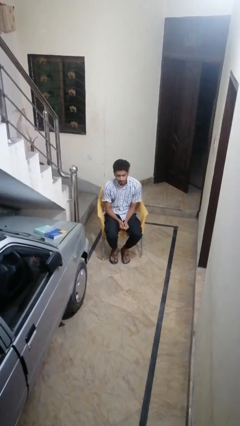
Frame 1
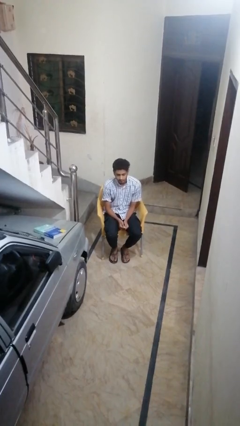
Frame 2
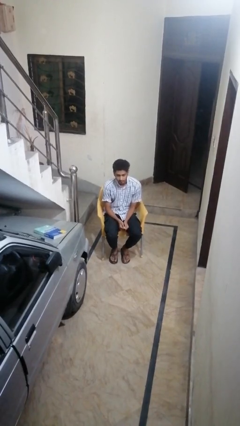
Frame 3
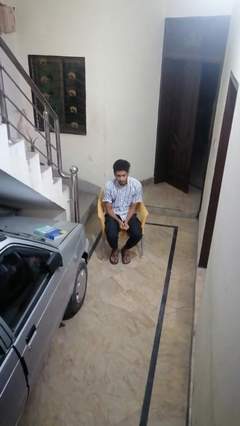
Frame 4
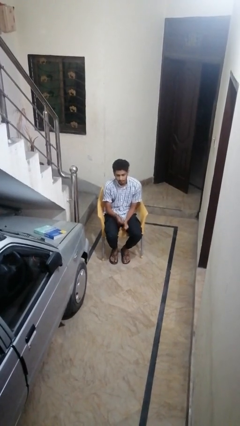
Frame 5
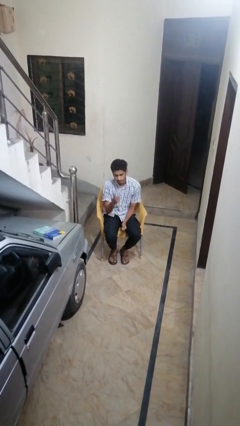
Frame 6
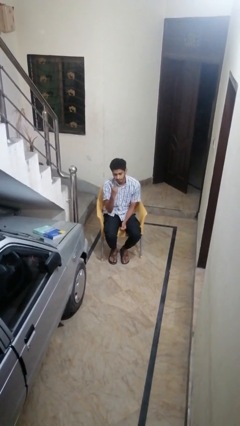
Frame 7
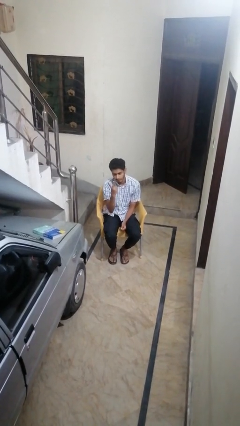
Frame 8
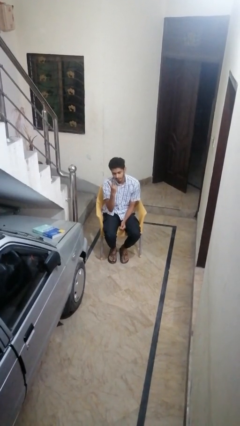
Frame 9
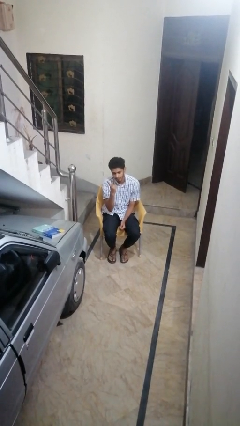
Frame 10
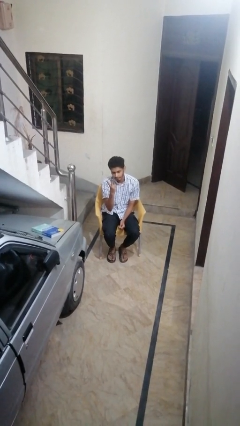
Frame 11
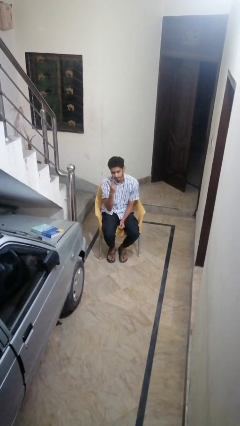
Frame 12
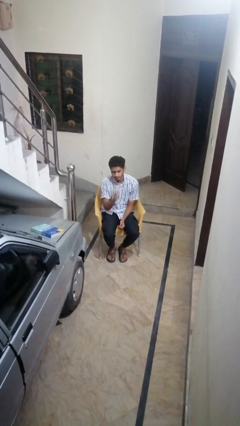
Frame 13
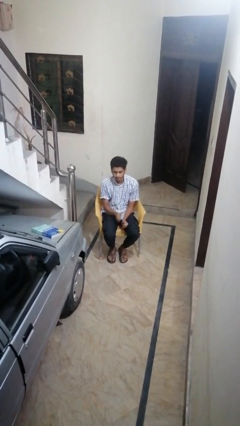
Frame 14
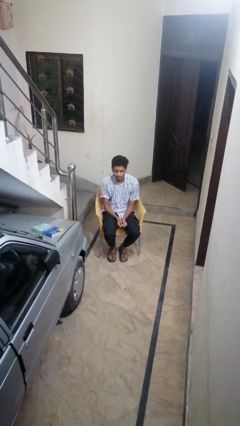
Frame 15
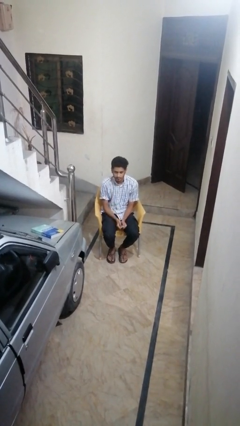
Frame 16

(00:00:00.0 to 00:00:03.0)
person gestures peace

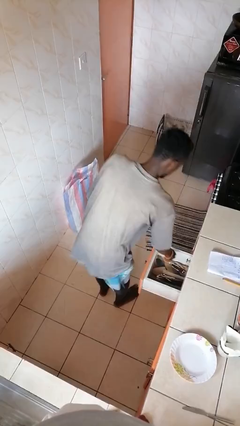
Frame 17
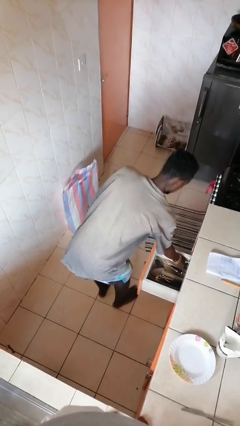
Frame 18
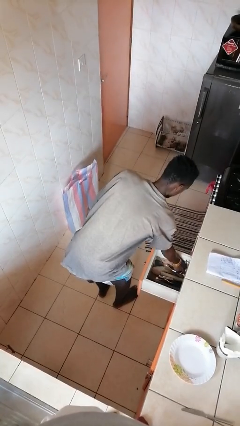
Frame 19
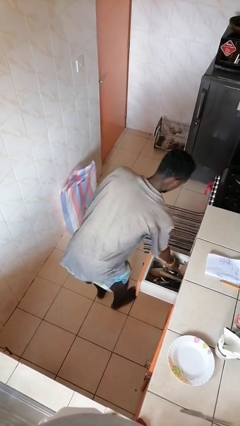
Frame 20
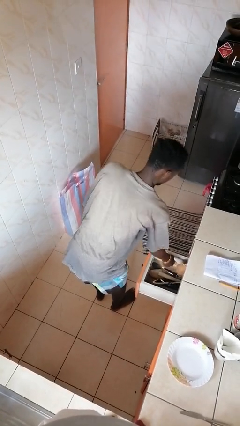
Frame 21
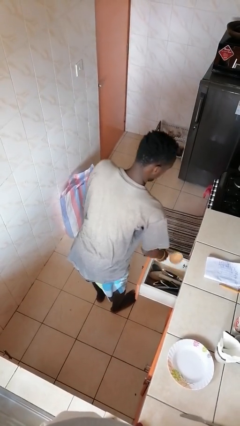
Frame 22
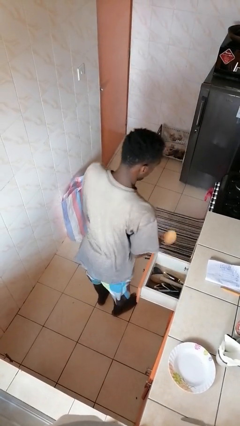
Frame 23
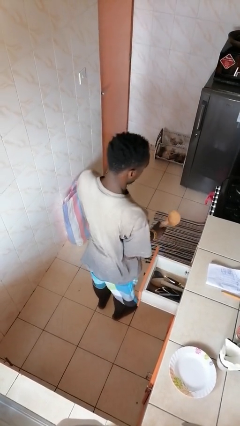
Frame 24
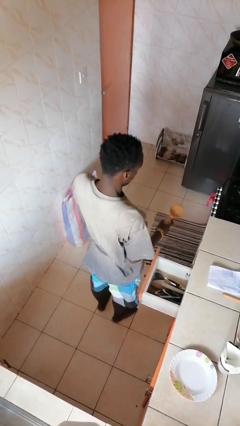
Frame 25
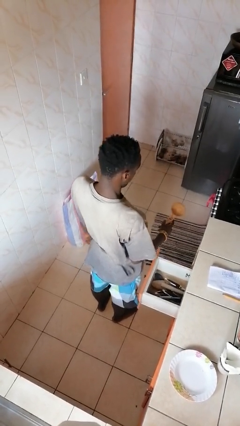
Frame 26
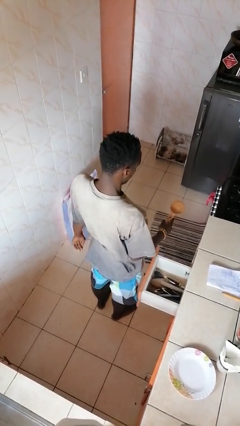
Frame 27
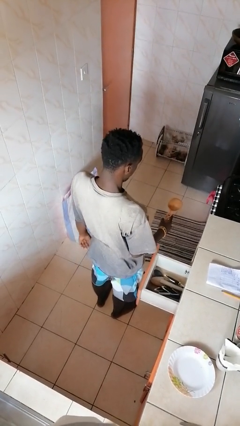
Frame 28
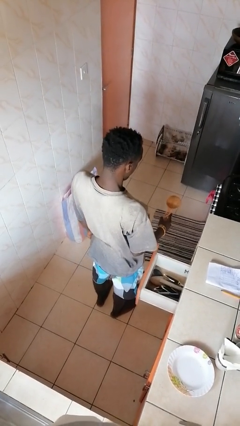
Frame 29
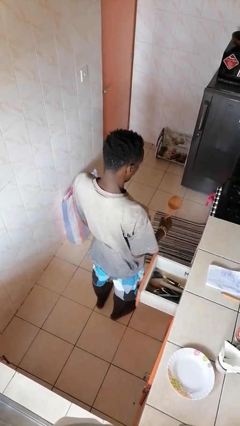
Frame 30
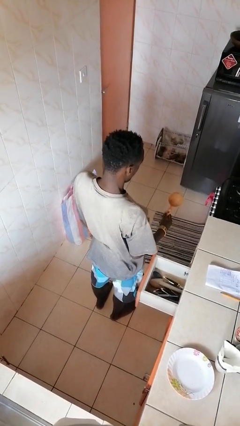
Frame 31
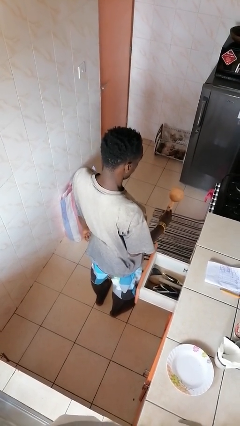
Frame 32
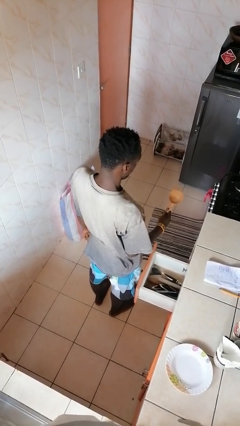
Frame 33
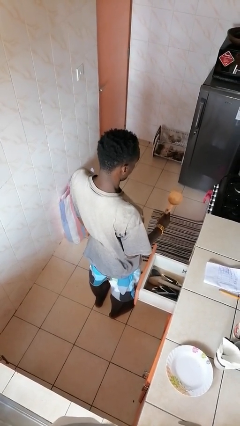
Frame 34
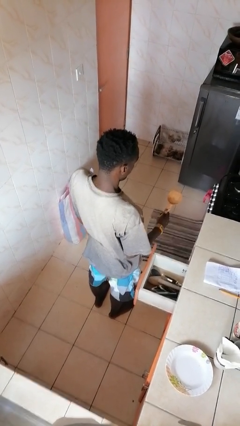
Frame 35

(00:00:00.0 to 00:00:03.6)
person takes object from kitchen drawer

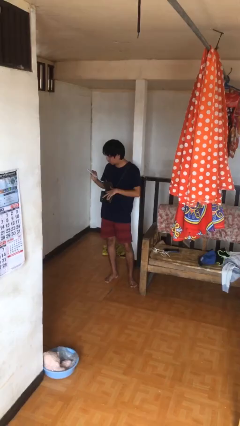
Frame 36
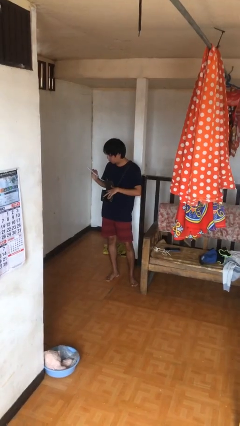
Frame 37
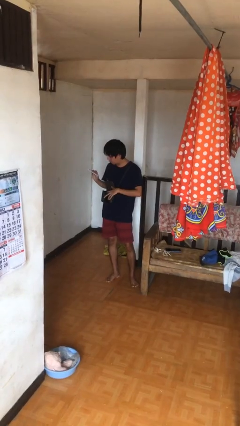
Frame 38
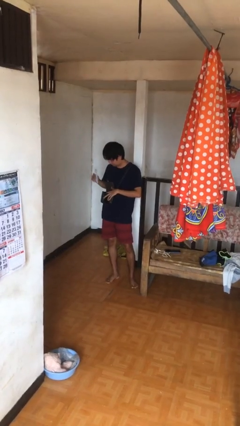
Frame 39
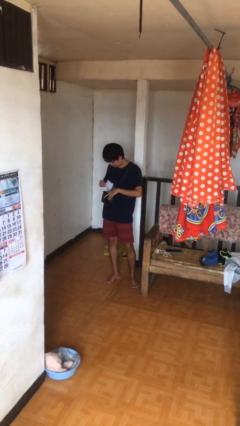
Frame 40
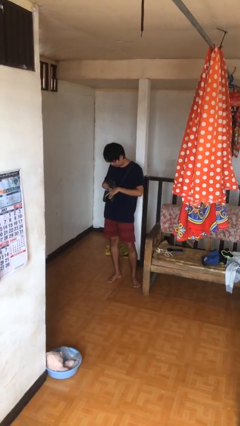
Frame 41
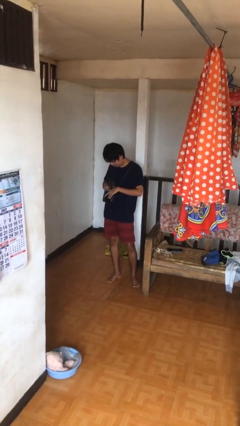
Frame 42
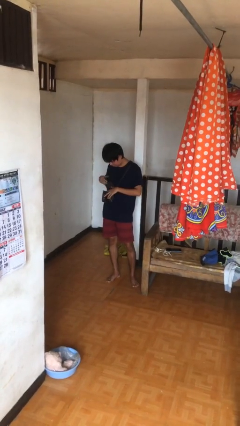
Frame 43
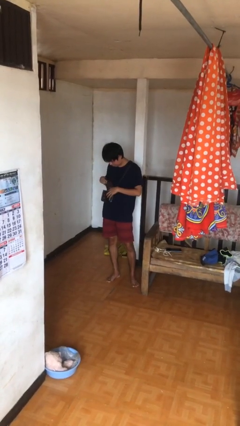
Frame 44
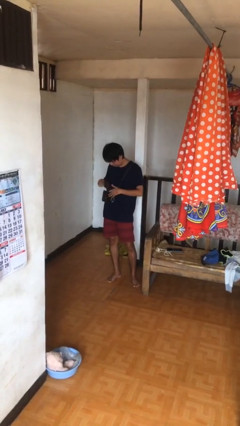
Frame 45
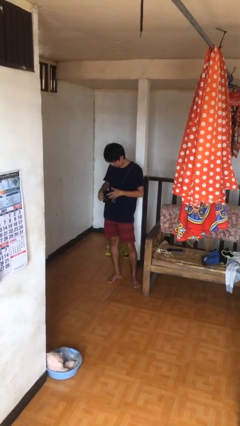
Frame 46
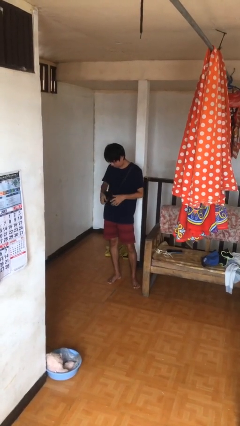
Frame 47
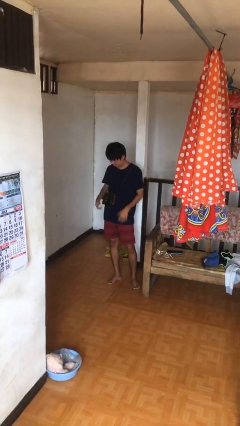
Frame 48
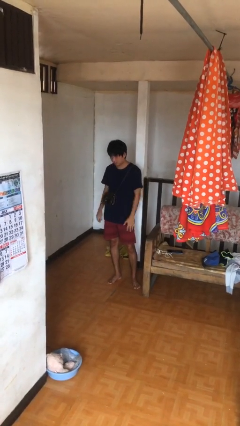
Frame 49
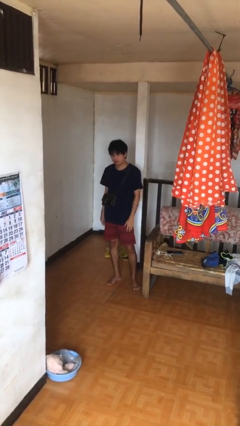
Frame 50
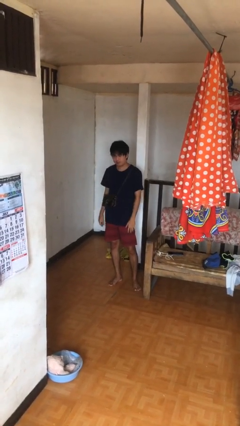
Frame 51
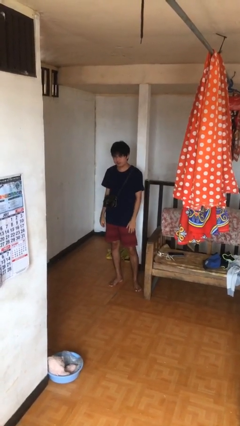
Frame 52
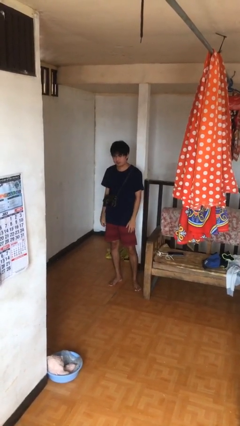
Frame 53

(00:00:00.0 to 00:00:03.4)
person puts object into purse

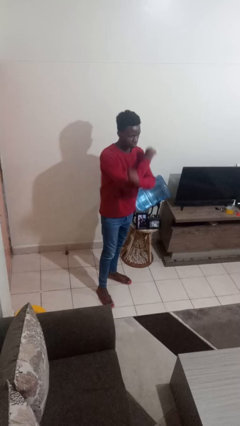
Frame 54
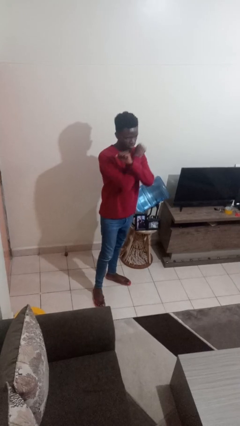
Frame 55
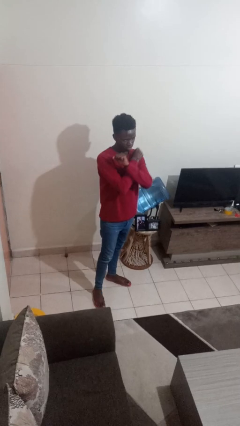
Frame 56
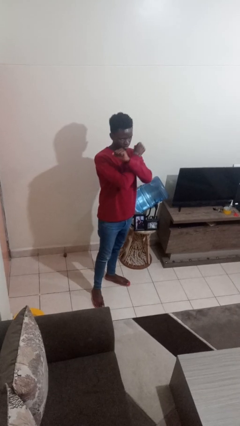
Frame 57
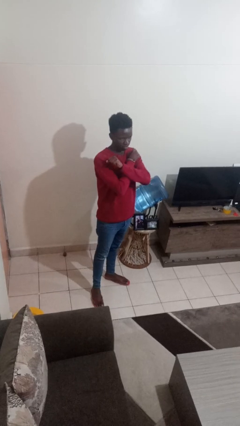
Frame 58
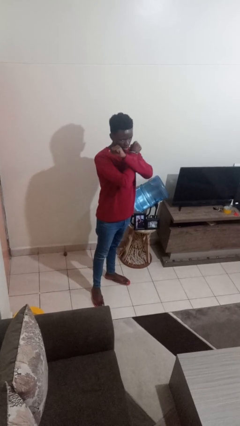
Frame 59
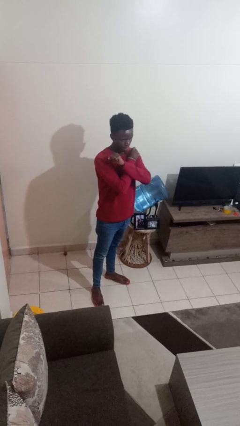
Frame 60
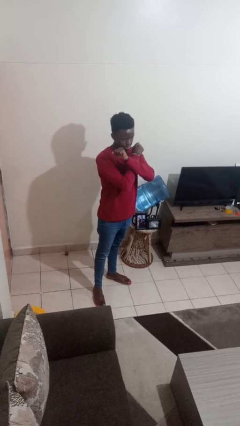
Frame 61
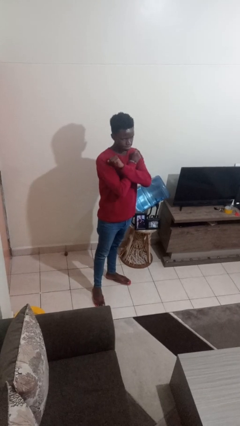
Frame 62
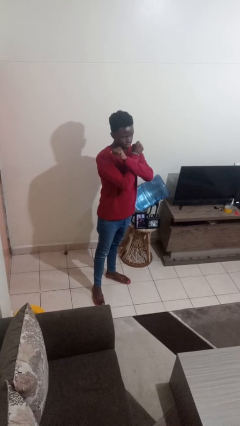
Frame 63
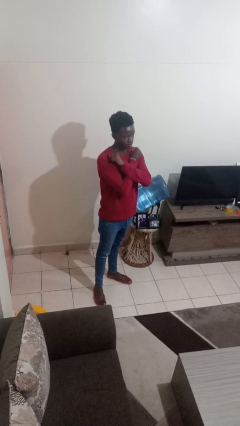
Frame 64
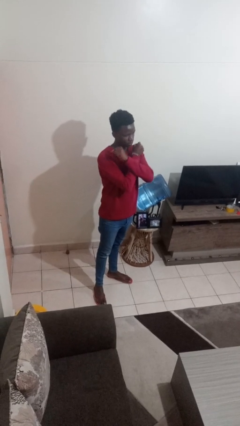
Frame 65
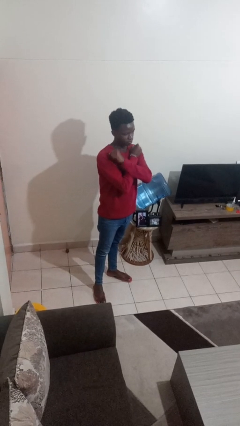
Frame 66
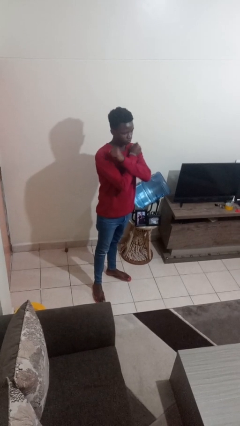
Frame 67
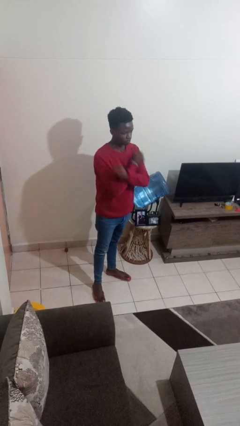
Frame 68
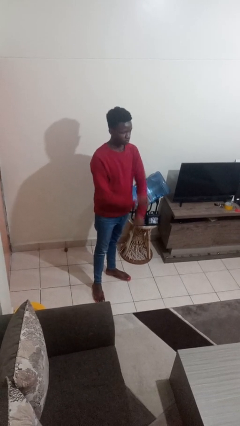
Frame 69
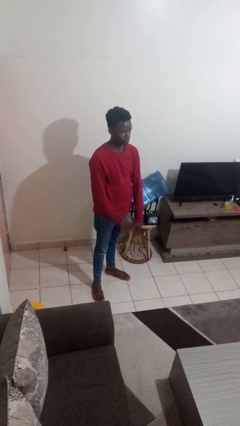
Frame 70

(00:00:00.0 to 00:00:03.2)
person gestures arms x

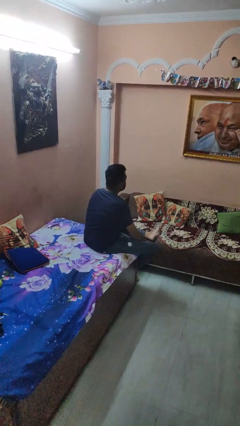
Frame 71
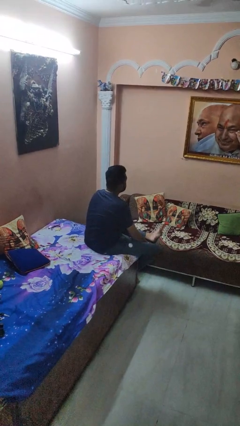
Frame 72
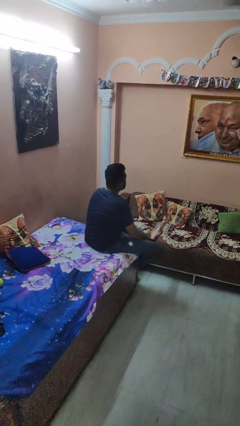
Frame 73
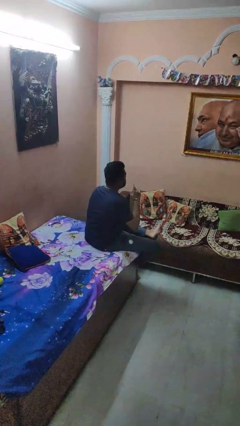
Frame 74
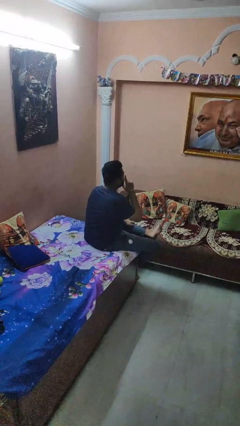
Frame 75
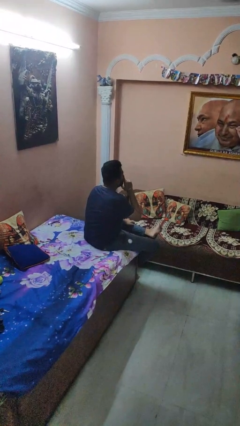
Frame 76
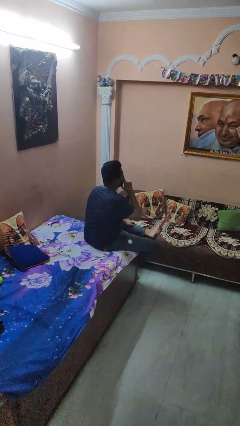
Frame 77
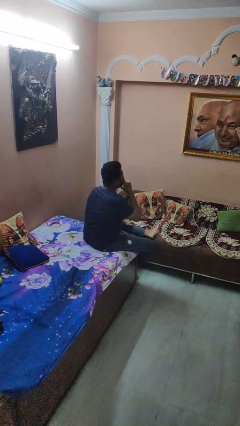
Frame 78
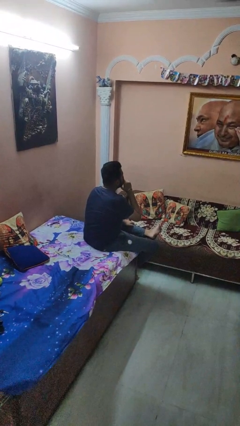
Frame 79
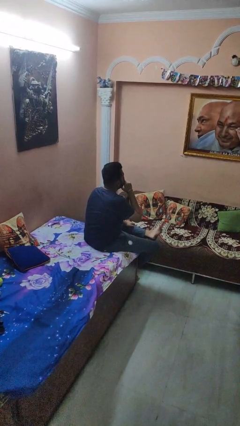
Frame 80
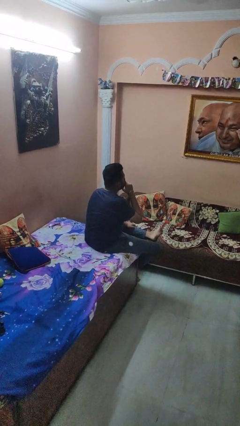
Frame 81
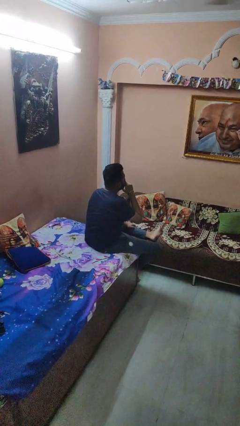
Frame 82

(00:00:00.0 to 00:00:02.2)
person gestures be quiet

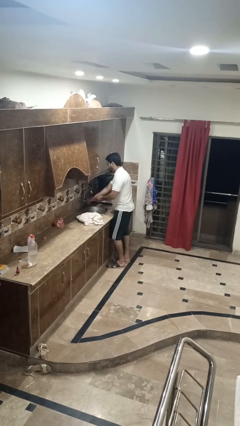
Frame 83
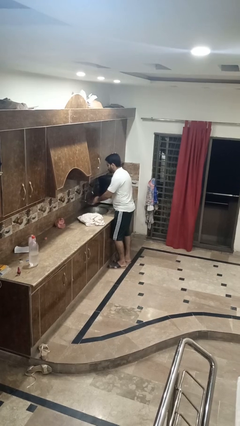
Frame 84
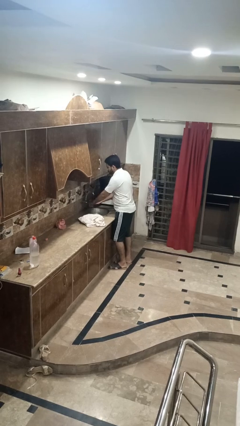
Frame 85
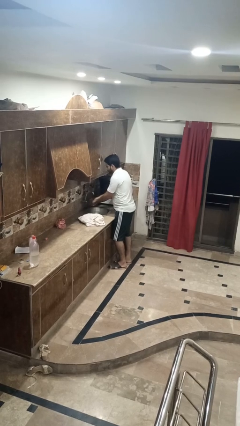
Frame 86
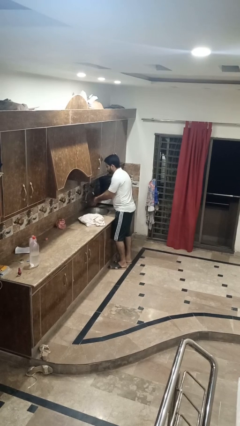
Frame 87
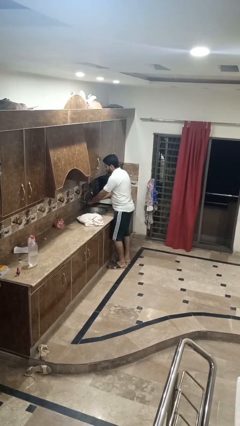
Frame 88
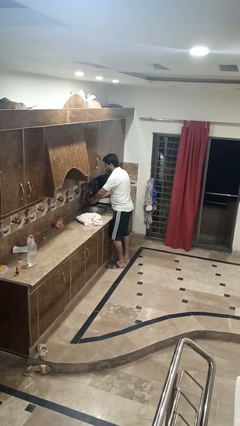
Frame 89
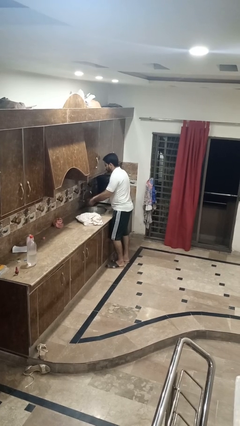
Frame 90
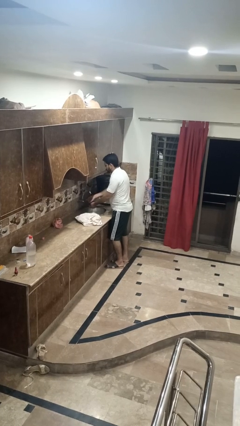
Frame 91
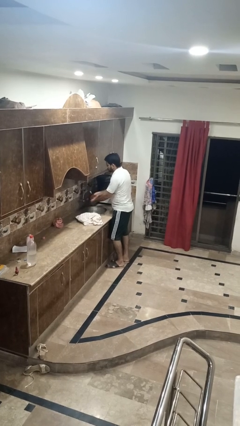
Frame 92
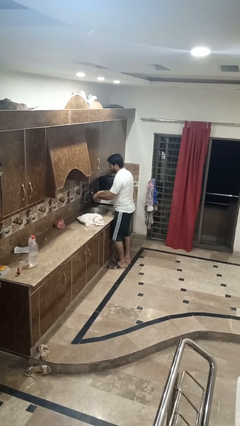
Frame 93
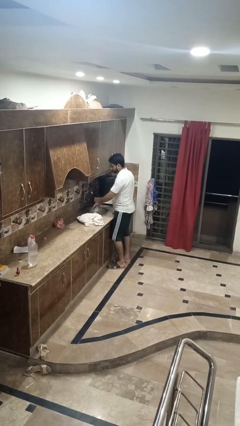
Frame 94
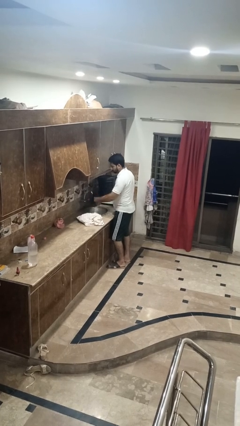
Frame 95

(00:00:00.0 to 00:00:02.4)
person washes hands
